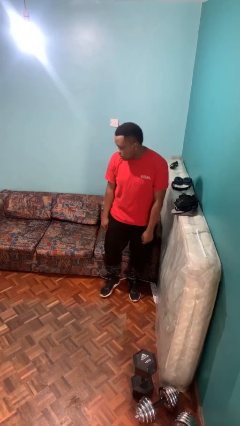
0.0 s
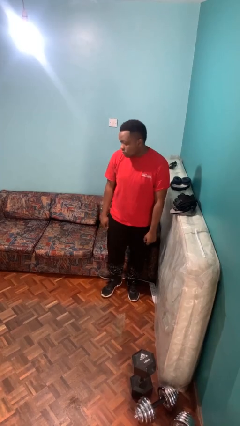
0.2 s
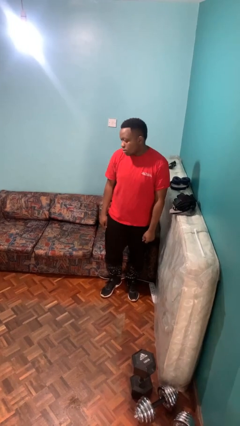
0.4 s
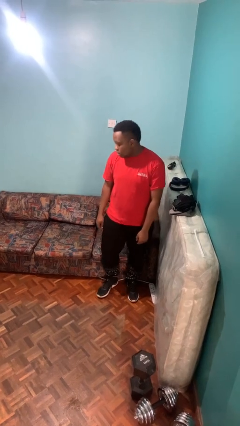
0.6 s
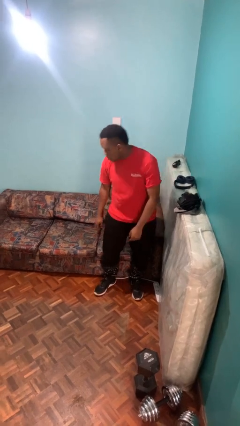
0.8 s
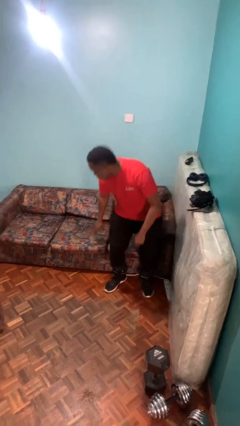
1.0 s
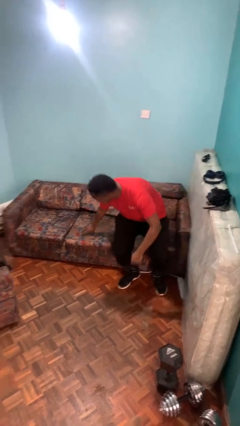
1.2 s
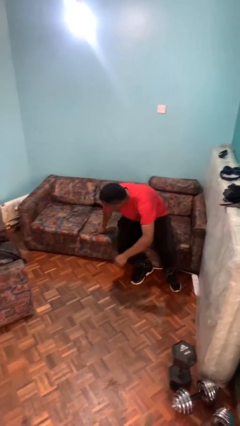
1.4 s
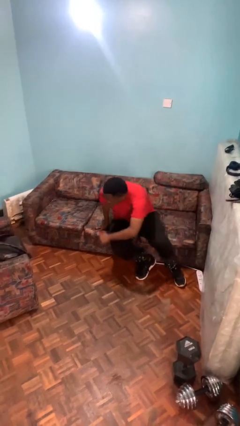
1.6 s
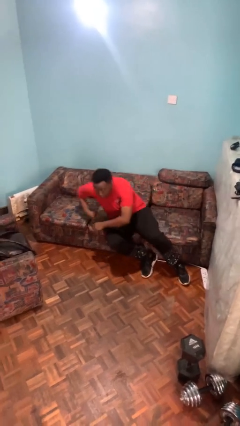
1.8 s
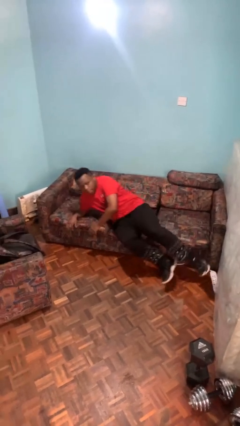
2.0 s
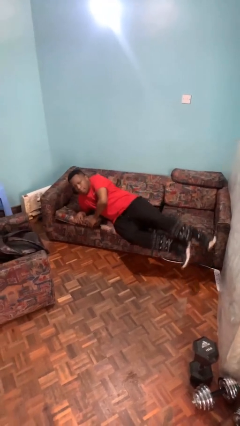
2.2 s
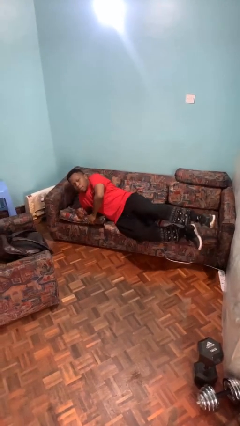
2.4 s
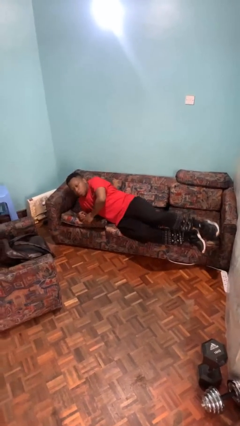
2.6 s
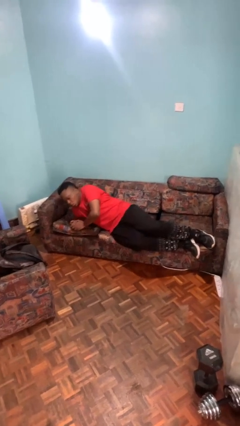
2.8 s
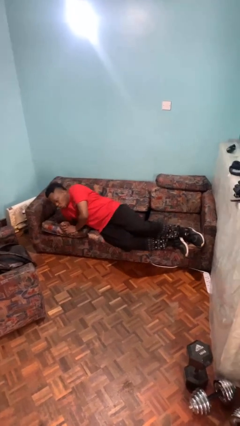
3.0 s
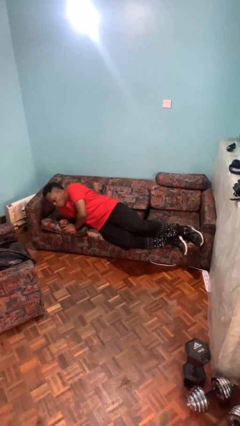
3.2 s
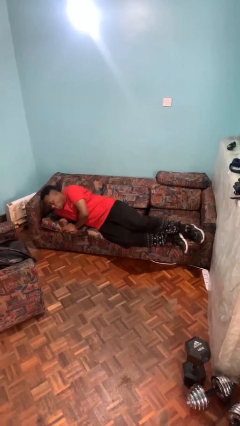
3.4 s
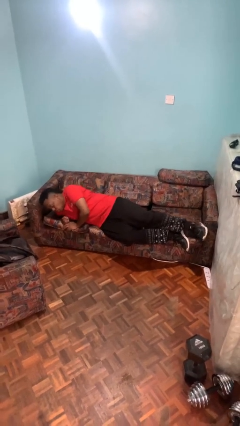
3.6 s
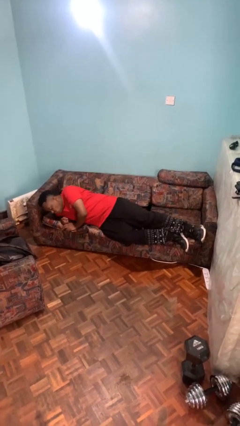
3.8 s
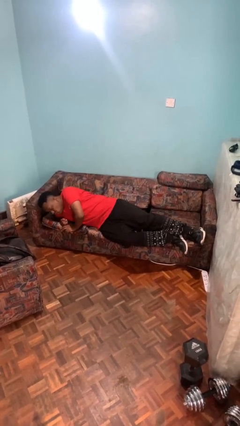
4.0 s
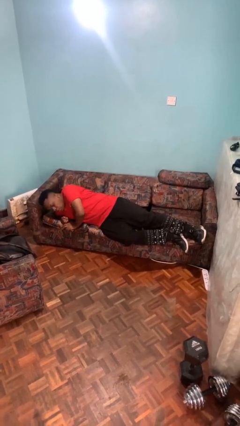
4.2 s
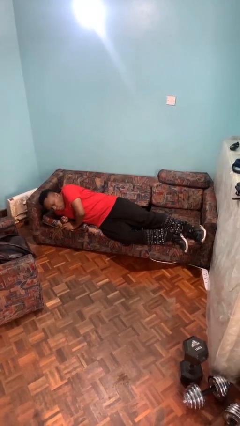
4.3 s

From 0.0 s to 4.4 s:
person lies down on couch

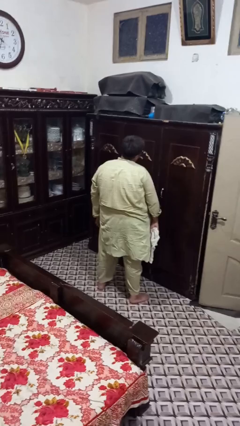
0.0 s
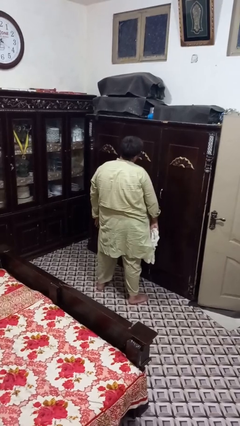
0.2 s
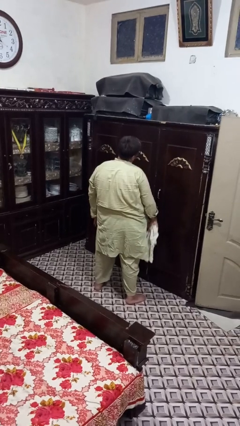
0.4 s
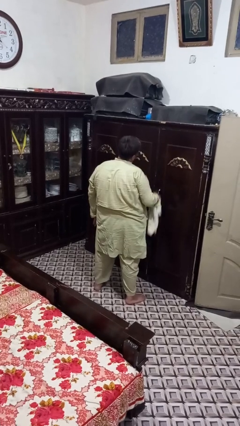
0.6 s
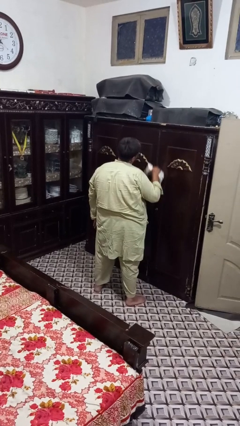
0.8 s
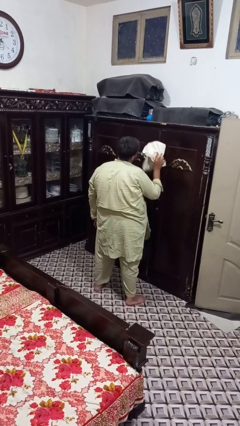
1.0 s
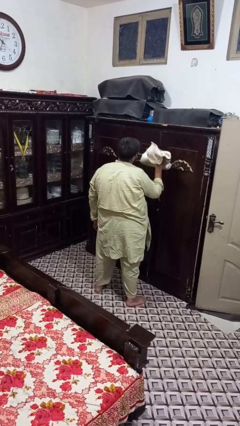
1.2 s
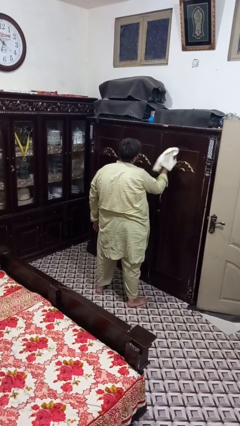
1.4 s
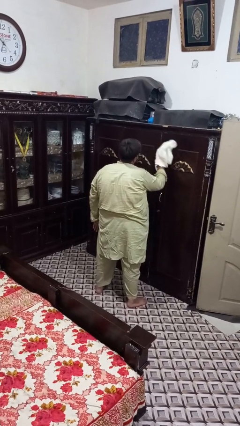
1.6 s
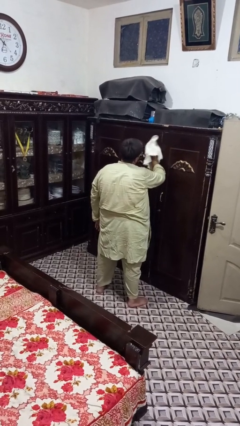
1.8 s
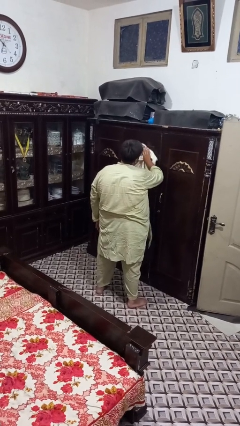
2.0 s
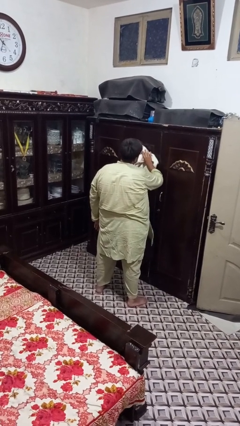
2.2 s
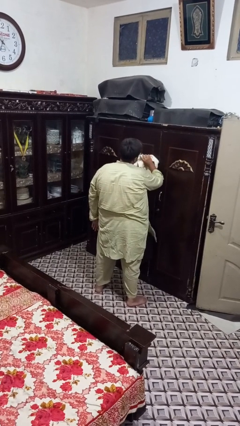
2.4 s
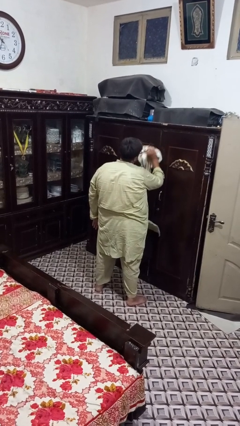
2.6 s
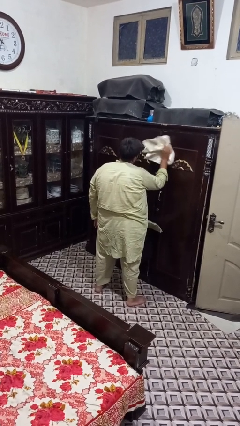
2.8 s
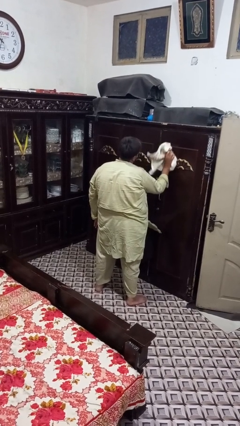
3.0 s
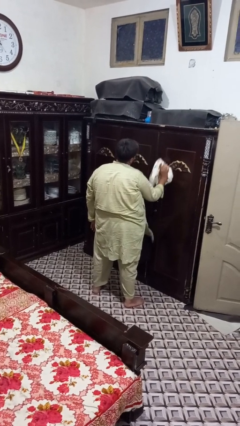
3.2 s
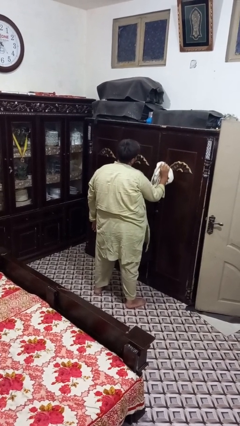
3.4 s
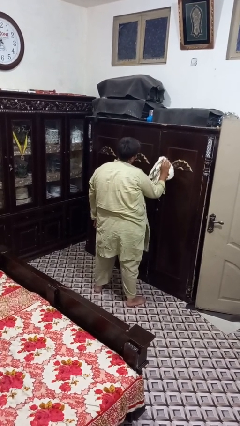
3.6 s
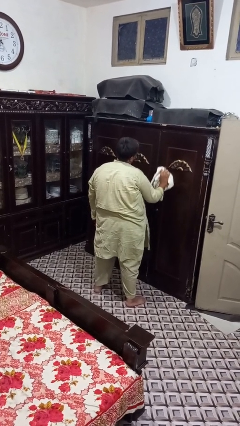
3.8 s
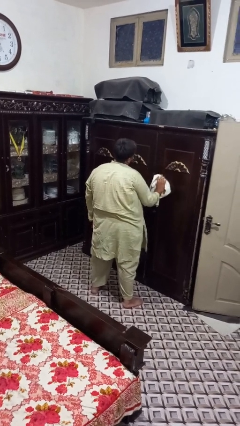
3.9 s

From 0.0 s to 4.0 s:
person dusts furniture

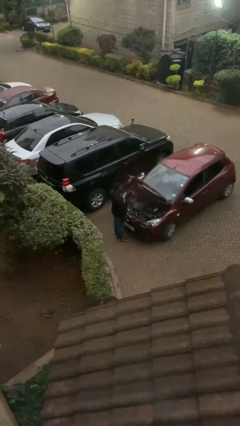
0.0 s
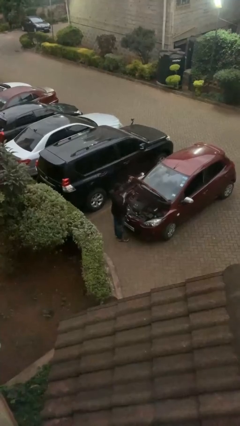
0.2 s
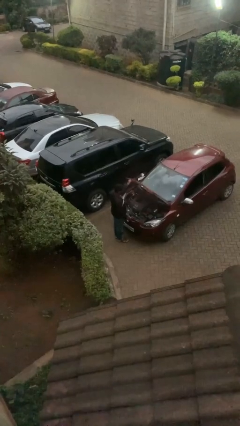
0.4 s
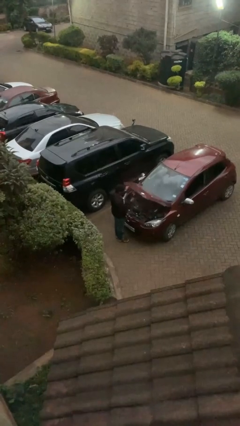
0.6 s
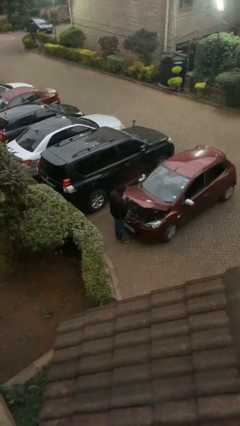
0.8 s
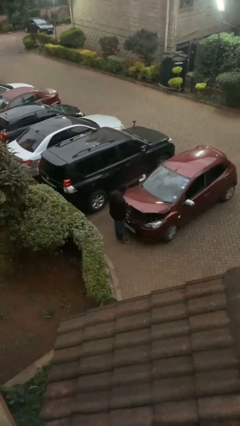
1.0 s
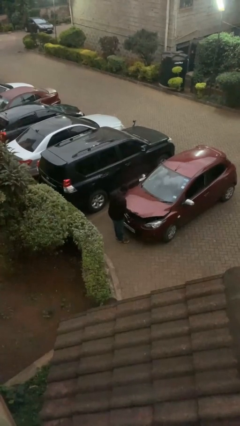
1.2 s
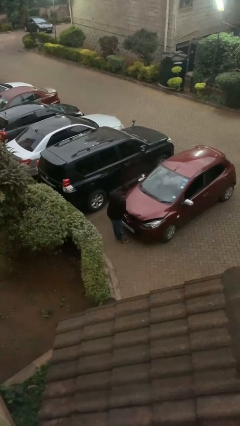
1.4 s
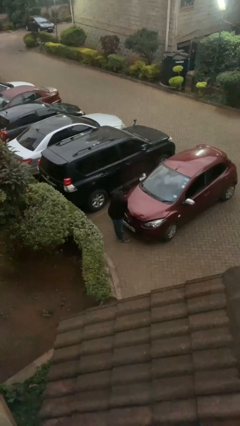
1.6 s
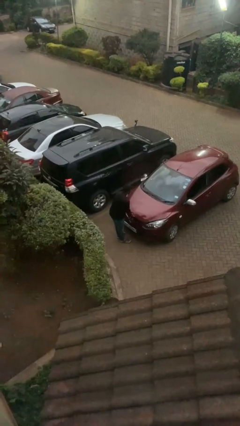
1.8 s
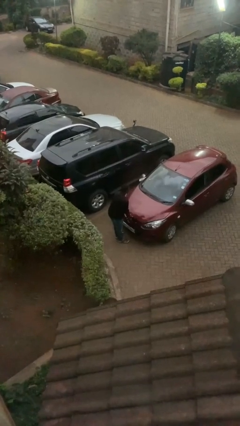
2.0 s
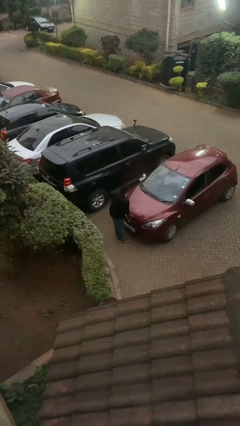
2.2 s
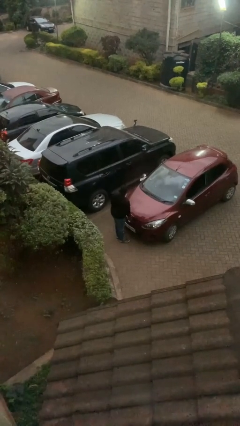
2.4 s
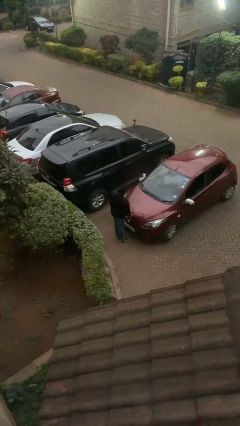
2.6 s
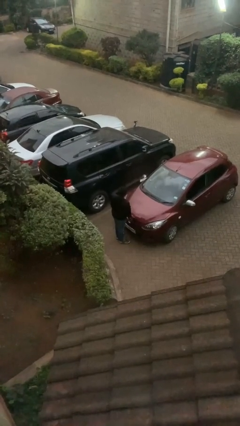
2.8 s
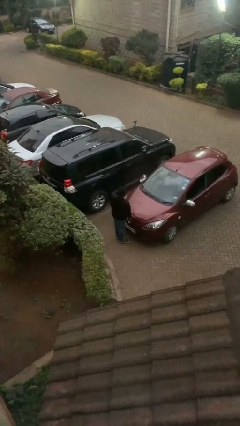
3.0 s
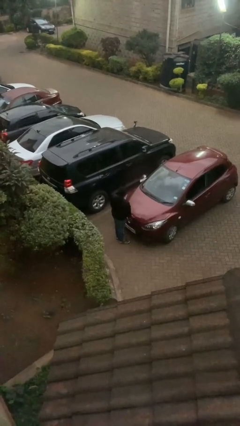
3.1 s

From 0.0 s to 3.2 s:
person closes car hood

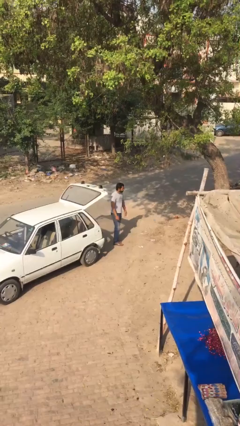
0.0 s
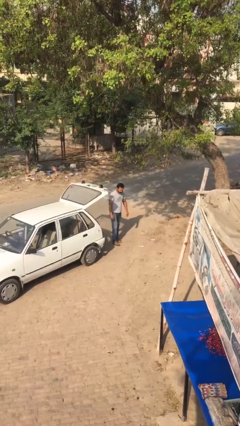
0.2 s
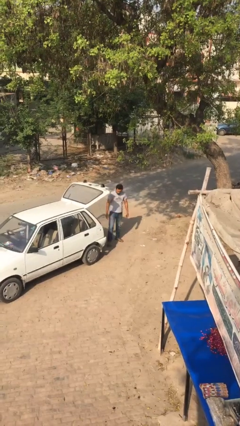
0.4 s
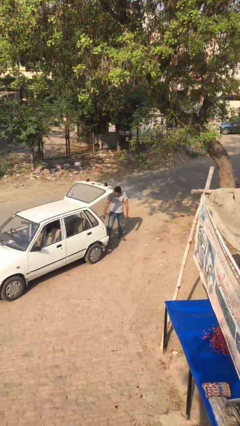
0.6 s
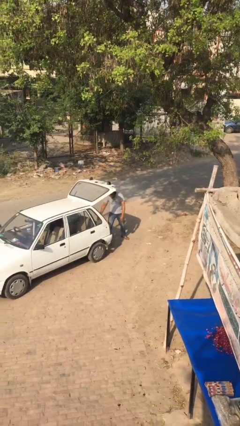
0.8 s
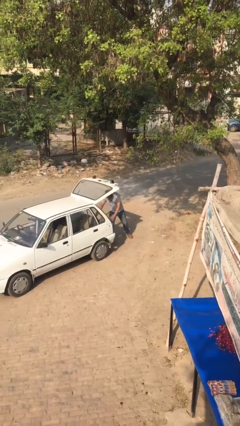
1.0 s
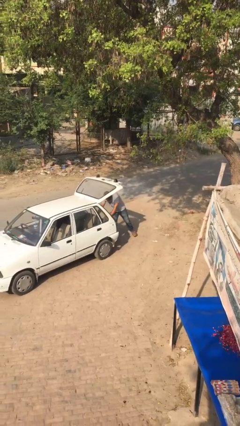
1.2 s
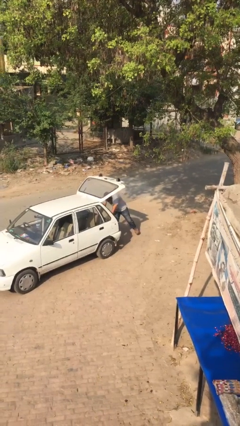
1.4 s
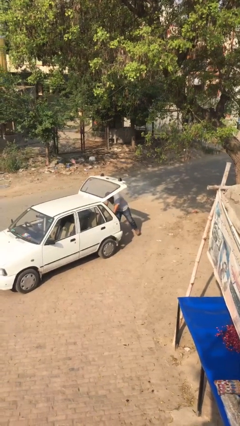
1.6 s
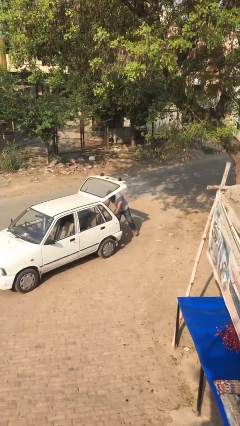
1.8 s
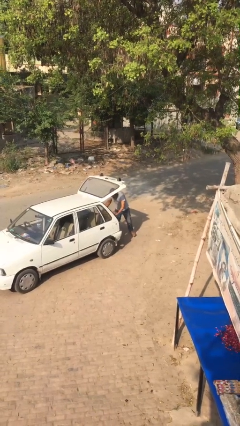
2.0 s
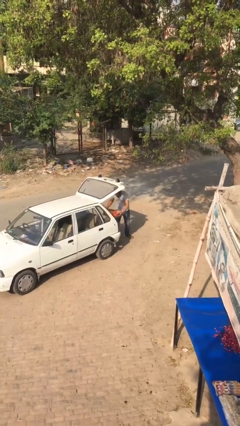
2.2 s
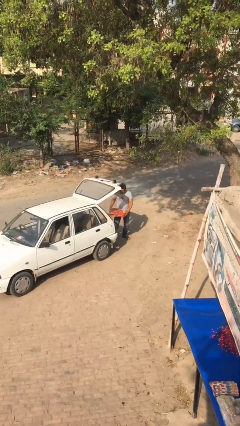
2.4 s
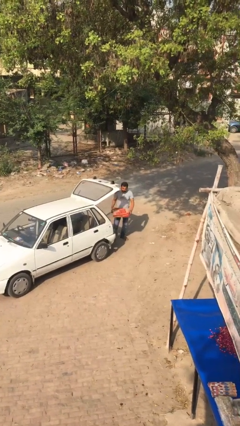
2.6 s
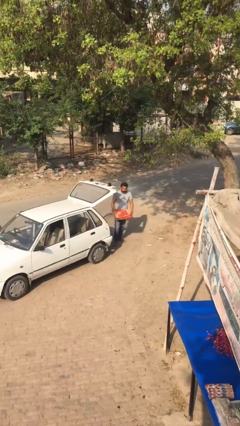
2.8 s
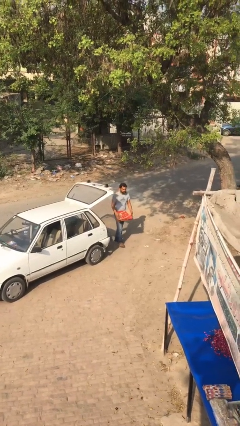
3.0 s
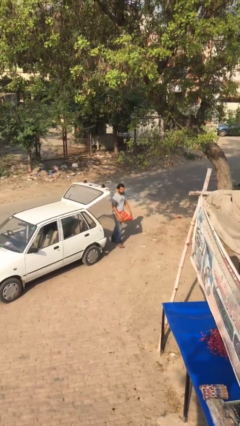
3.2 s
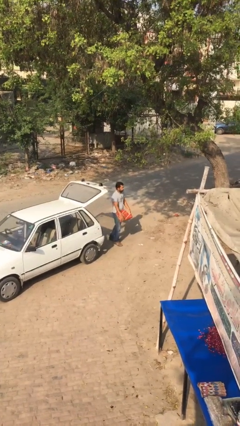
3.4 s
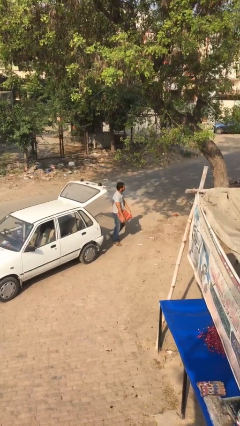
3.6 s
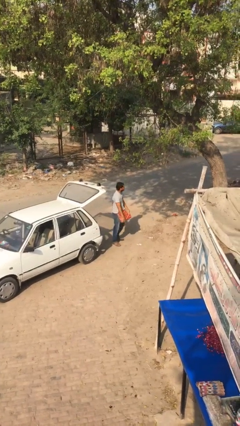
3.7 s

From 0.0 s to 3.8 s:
person unloads car

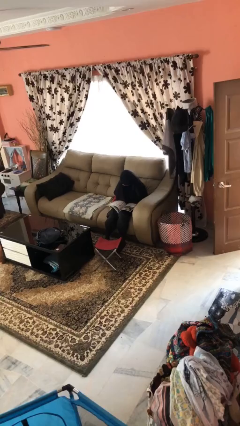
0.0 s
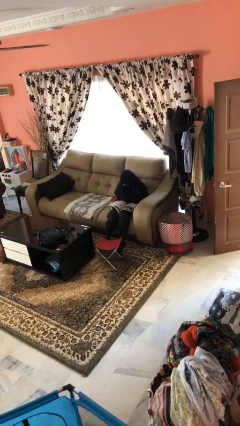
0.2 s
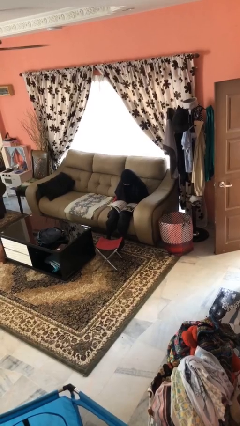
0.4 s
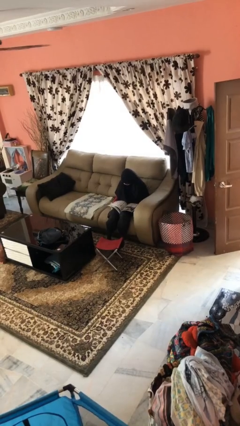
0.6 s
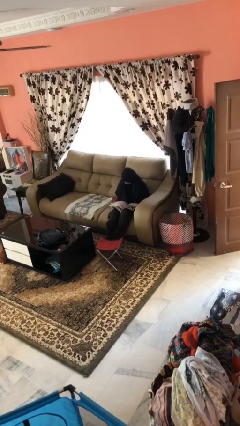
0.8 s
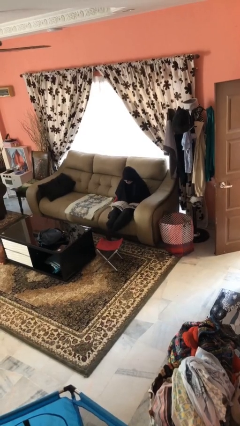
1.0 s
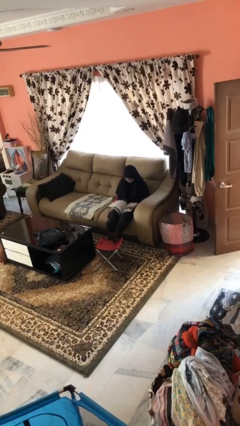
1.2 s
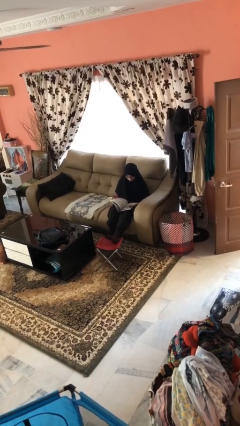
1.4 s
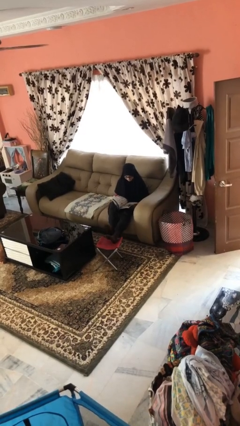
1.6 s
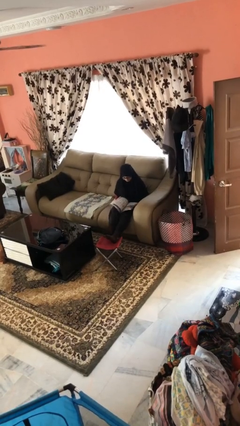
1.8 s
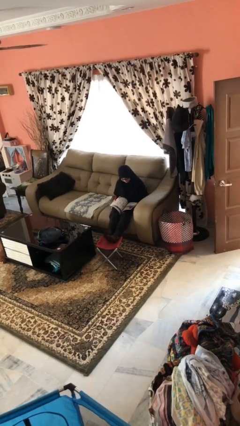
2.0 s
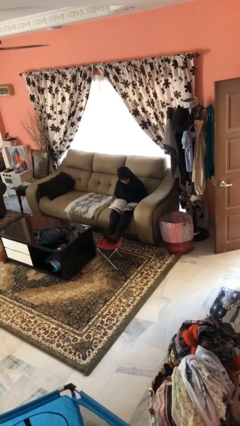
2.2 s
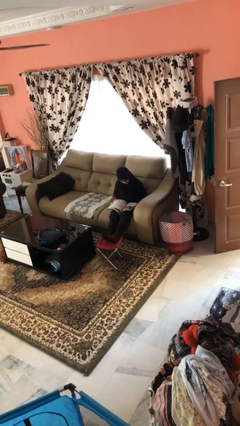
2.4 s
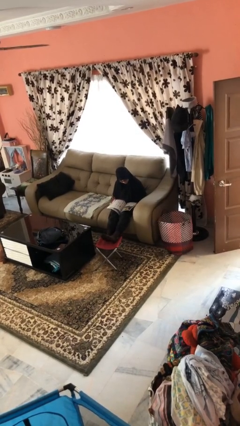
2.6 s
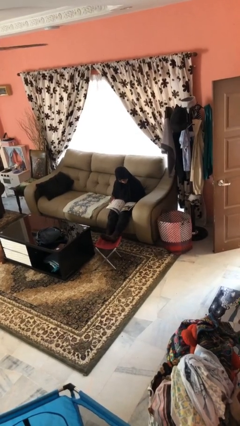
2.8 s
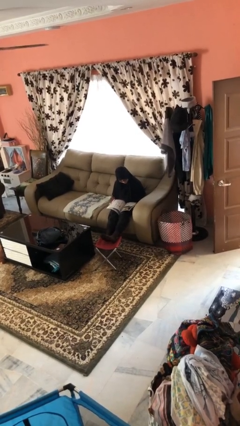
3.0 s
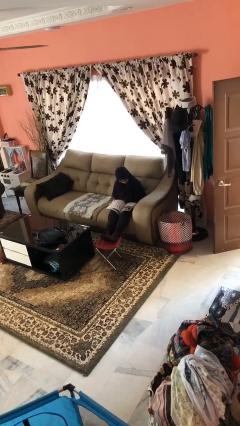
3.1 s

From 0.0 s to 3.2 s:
person puts feet up
